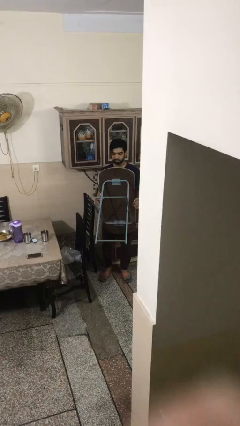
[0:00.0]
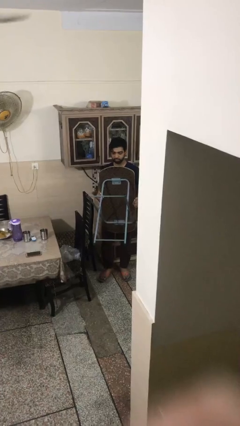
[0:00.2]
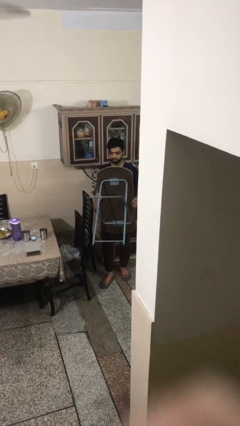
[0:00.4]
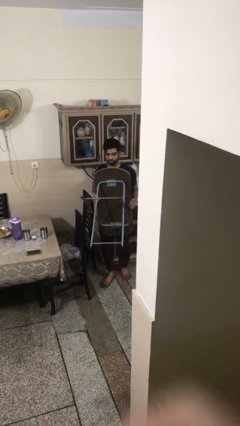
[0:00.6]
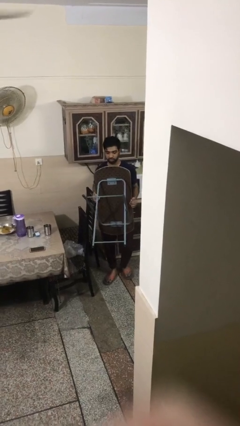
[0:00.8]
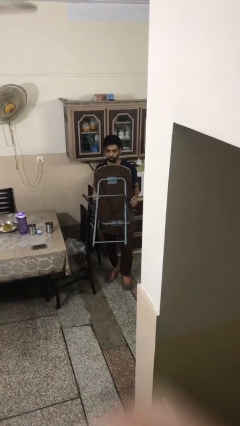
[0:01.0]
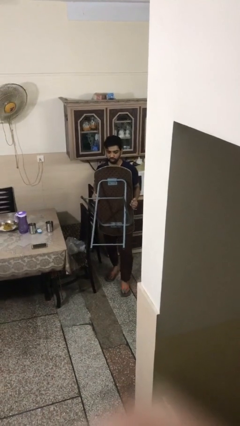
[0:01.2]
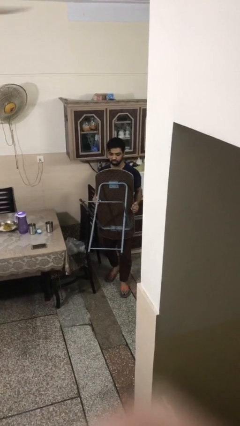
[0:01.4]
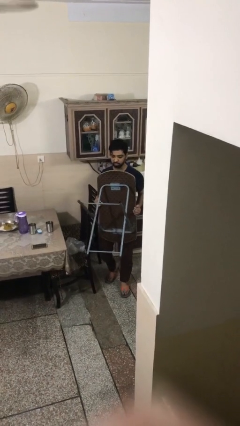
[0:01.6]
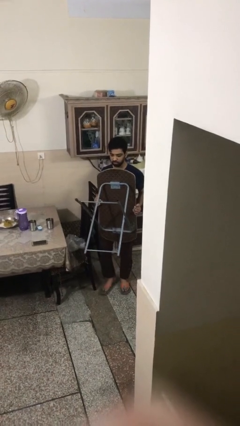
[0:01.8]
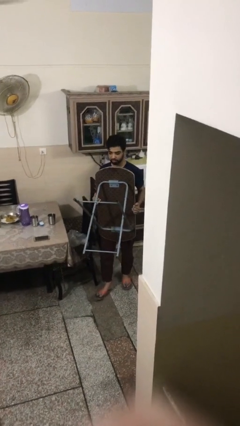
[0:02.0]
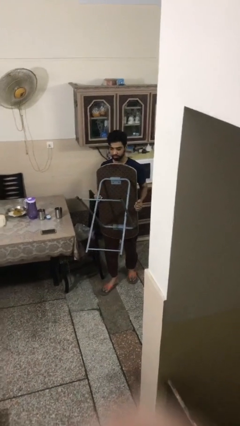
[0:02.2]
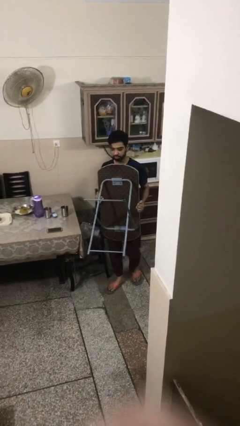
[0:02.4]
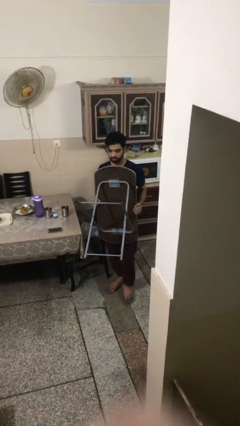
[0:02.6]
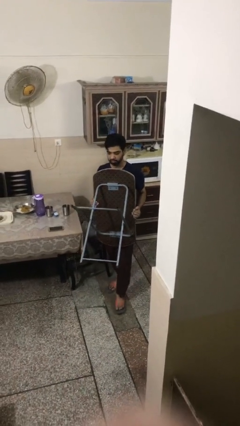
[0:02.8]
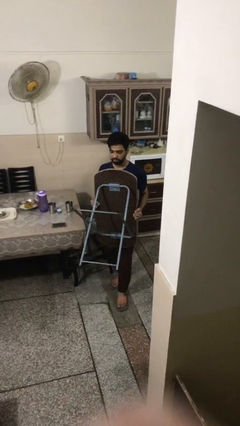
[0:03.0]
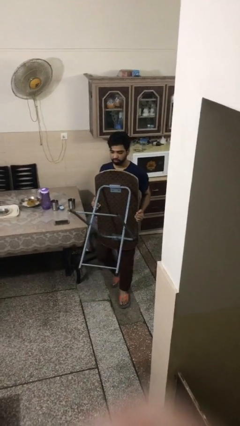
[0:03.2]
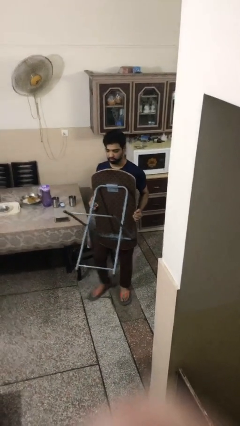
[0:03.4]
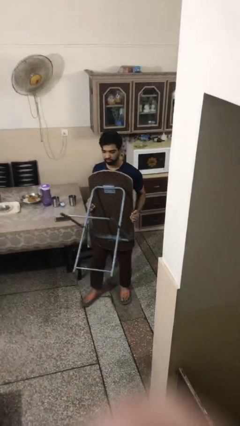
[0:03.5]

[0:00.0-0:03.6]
person carries heavy object

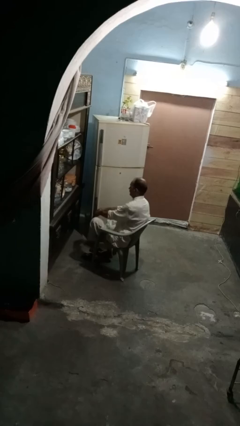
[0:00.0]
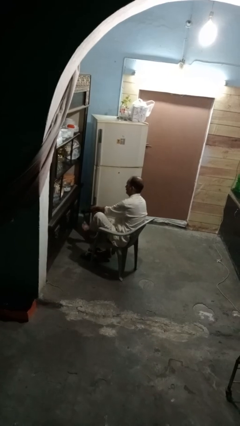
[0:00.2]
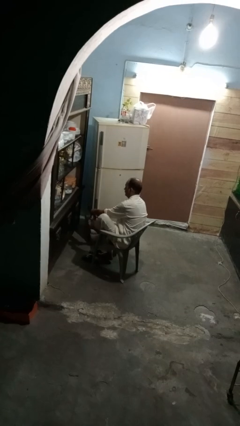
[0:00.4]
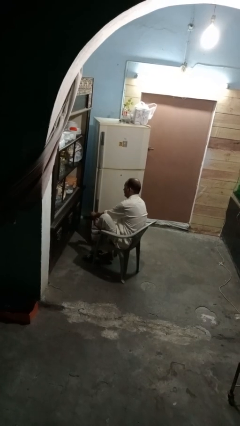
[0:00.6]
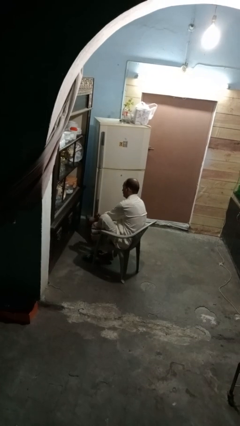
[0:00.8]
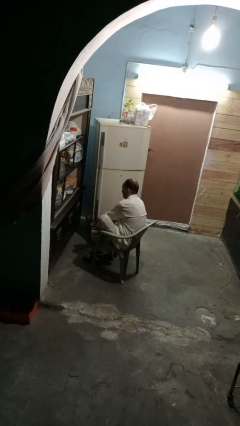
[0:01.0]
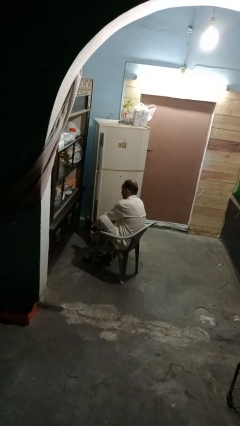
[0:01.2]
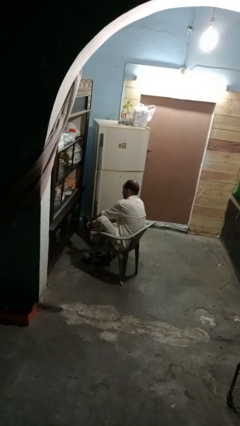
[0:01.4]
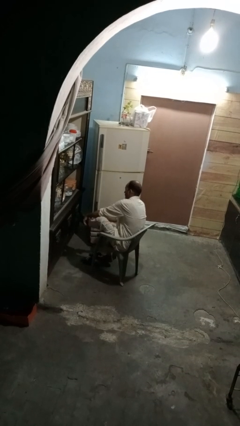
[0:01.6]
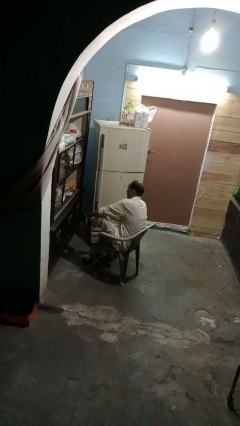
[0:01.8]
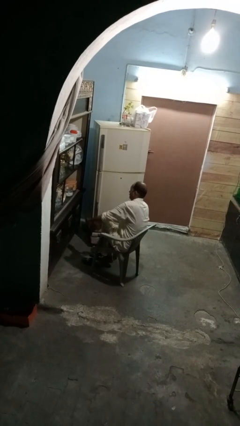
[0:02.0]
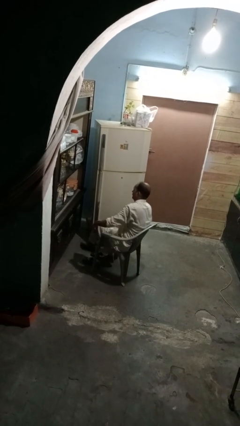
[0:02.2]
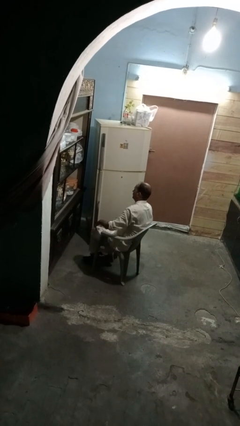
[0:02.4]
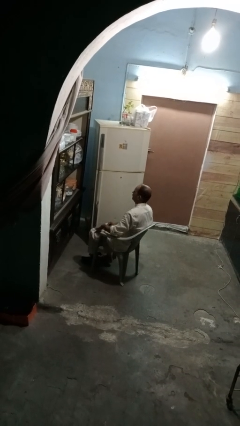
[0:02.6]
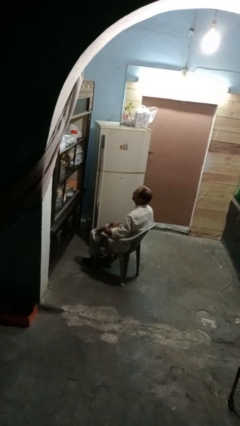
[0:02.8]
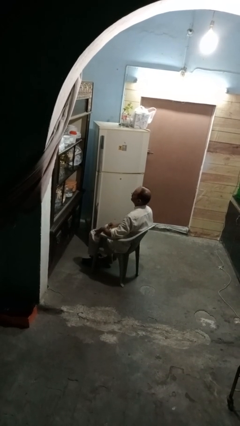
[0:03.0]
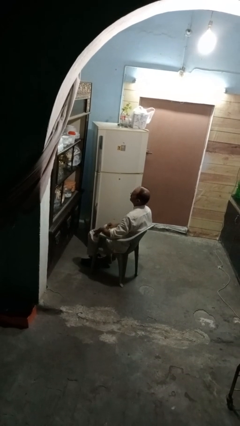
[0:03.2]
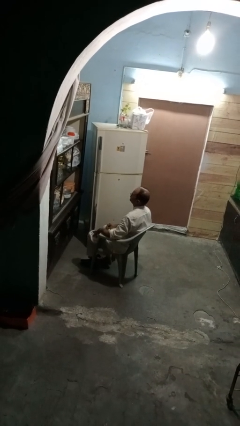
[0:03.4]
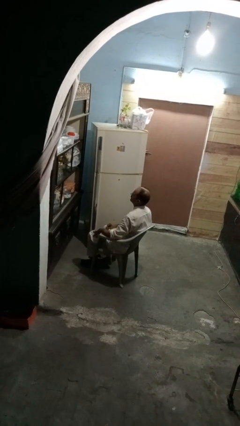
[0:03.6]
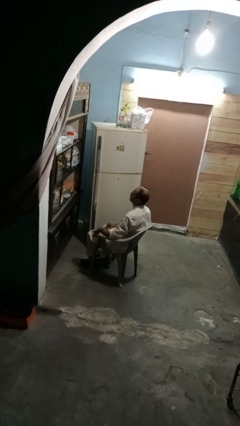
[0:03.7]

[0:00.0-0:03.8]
person puts on socks

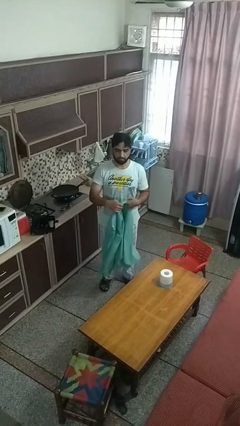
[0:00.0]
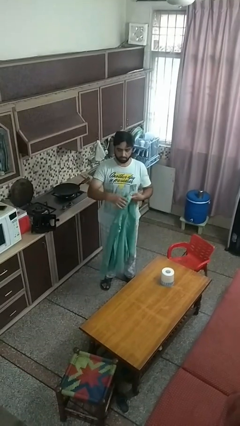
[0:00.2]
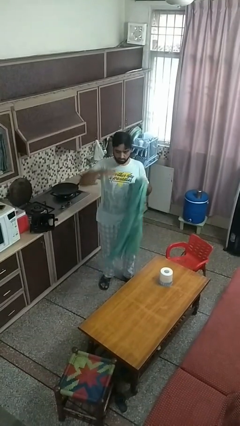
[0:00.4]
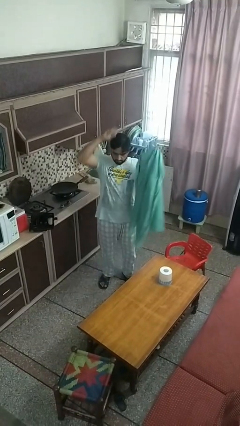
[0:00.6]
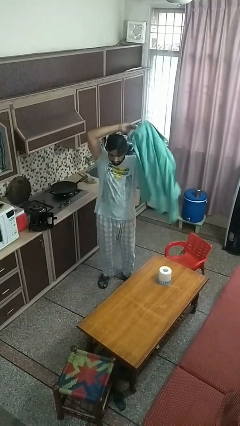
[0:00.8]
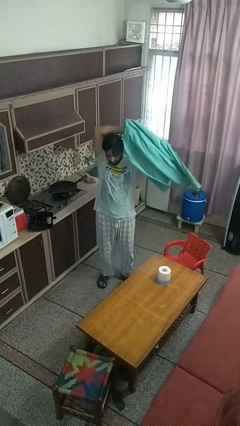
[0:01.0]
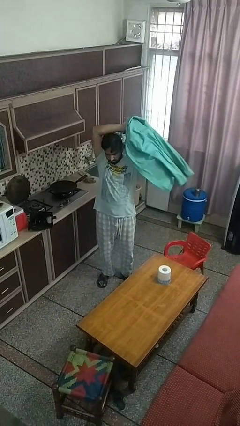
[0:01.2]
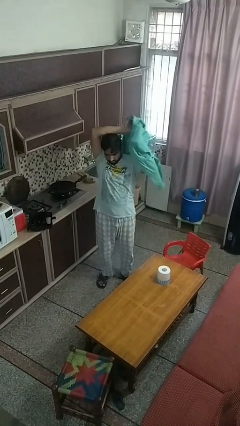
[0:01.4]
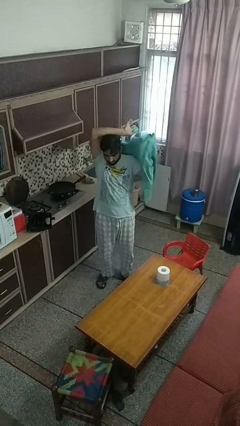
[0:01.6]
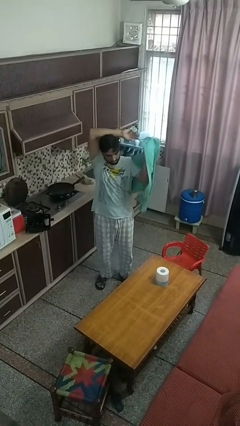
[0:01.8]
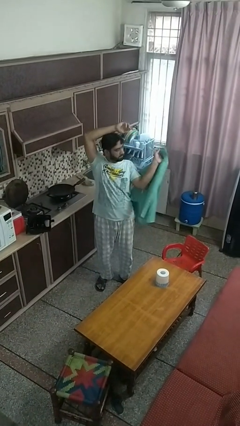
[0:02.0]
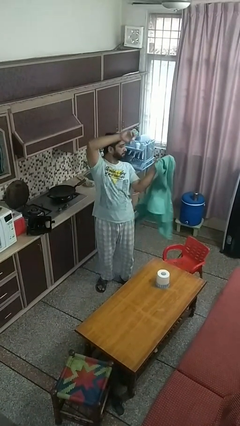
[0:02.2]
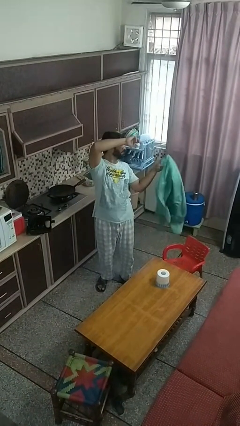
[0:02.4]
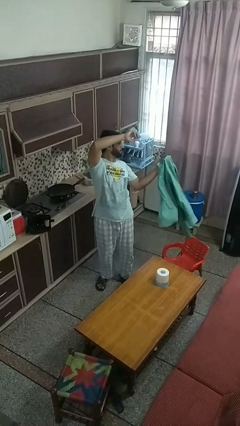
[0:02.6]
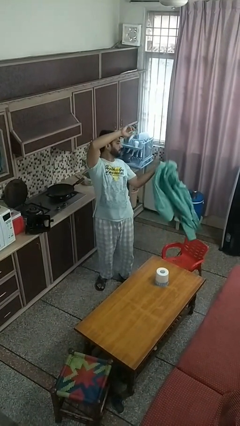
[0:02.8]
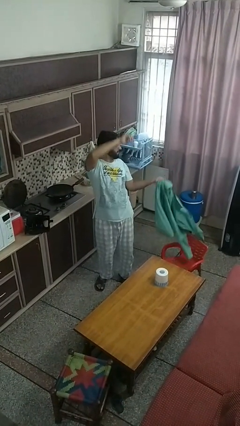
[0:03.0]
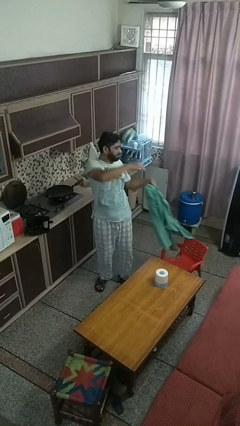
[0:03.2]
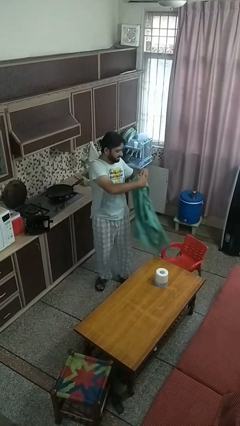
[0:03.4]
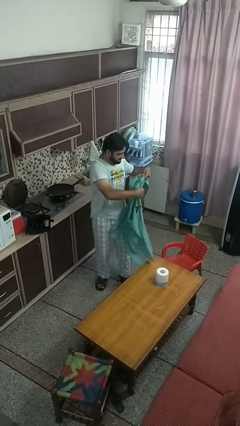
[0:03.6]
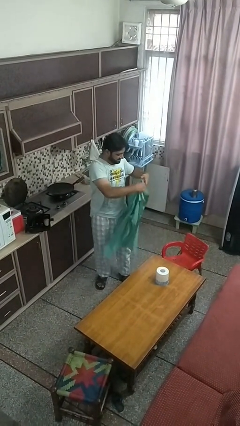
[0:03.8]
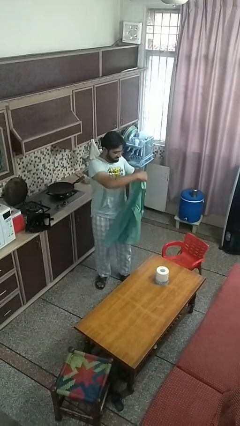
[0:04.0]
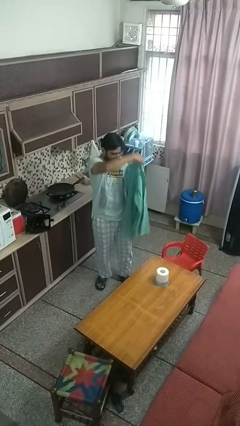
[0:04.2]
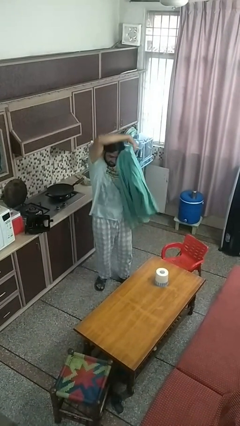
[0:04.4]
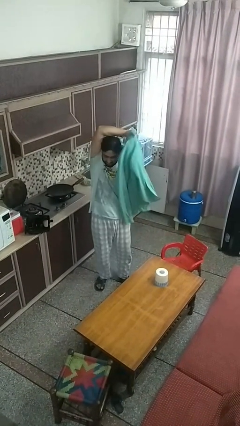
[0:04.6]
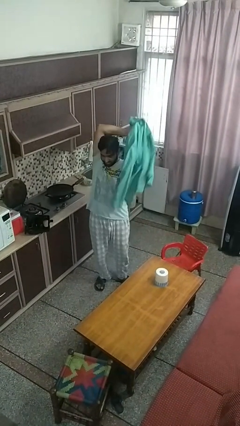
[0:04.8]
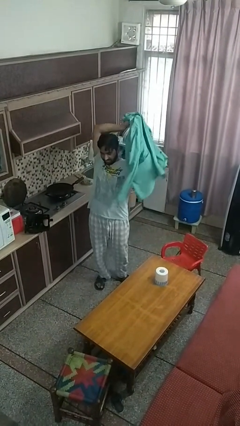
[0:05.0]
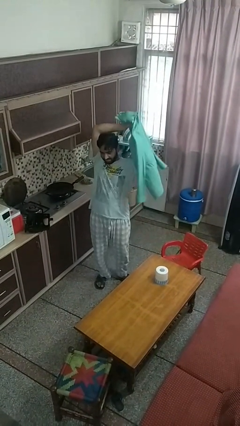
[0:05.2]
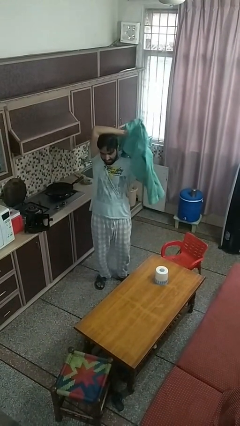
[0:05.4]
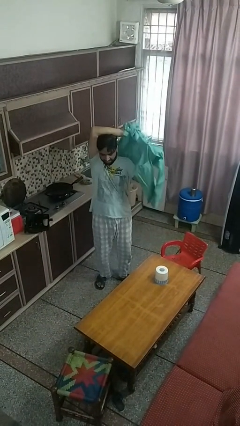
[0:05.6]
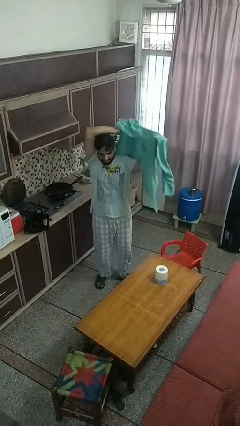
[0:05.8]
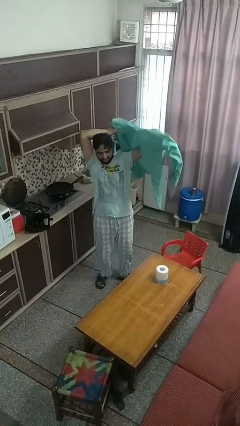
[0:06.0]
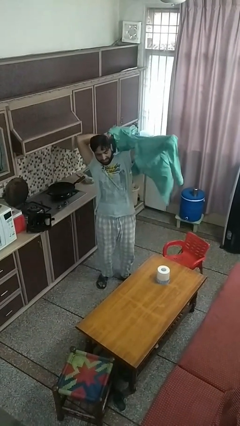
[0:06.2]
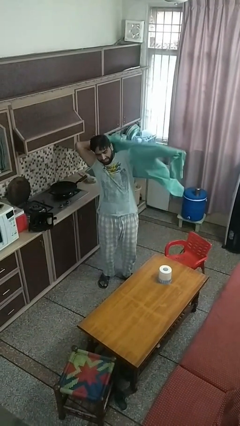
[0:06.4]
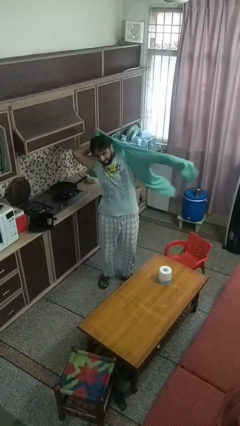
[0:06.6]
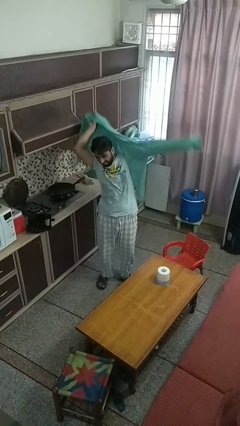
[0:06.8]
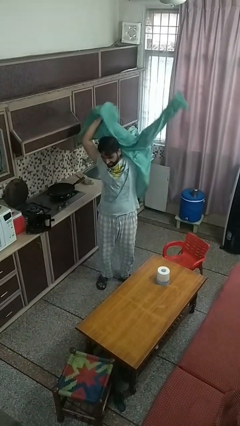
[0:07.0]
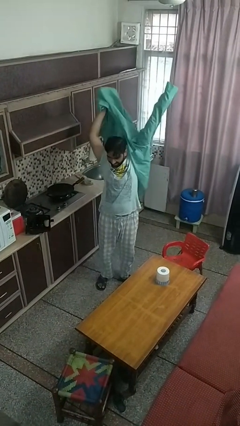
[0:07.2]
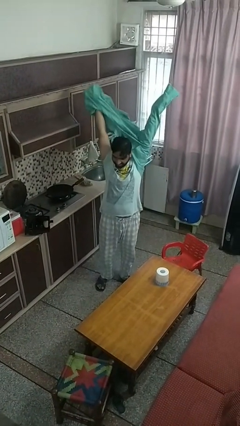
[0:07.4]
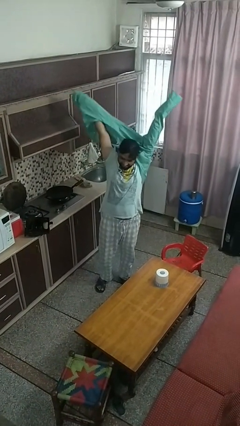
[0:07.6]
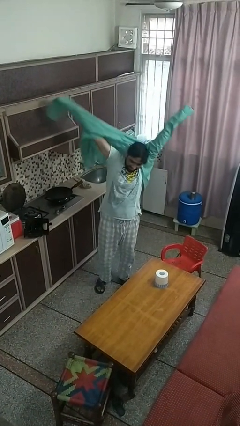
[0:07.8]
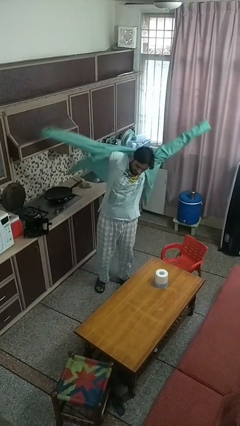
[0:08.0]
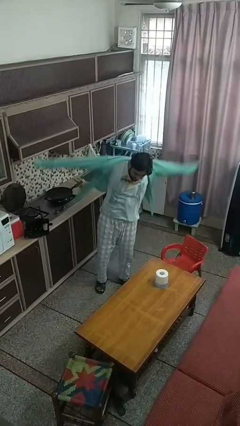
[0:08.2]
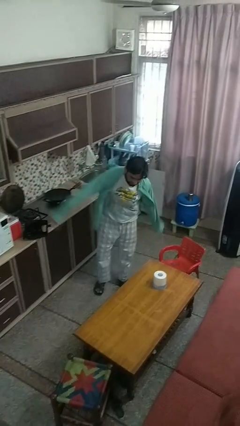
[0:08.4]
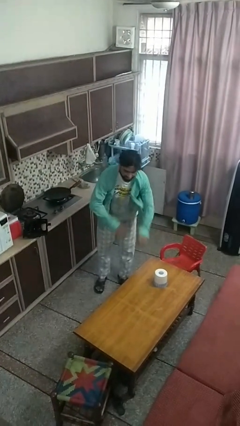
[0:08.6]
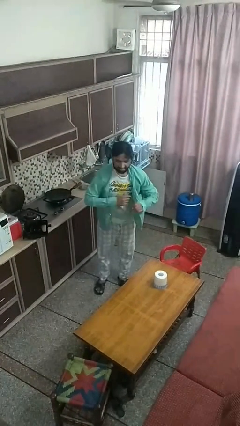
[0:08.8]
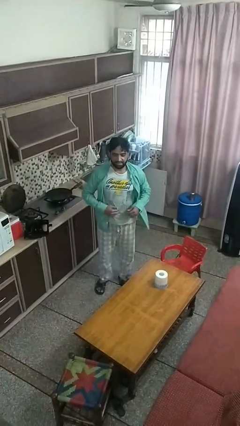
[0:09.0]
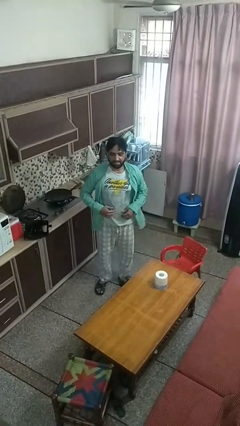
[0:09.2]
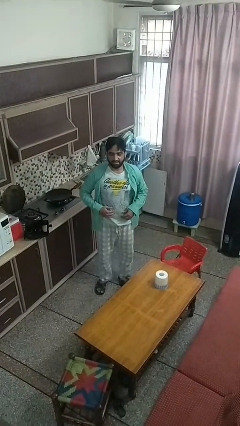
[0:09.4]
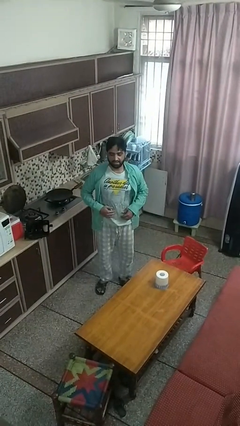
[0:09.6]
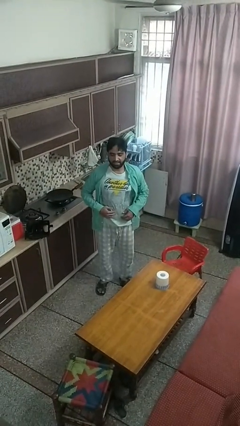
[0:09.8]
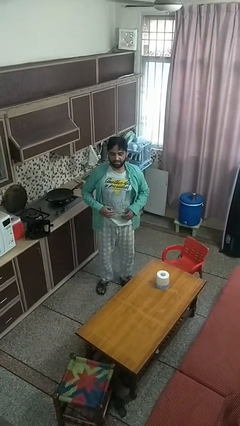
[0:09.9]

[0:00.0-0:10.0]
person puts on shirt

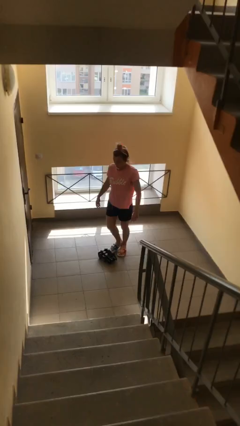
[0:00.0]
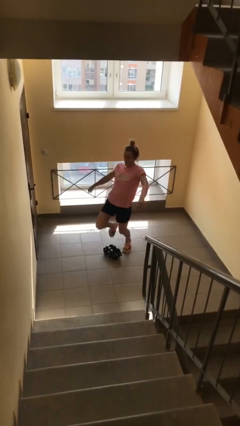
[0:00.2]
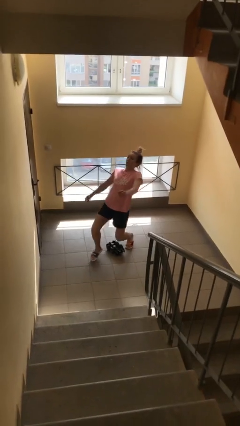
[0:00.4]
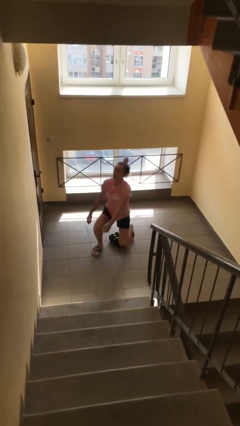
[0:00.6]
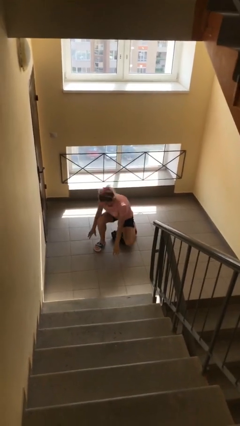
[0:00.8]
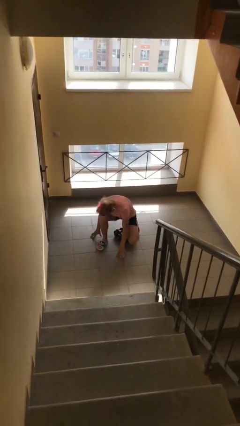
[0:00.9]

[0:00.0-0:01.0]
person trips on object on floor
